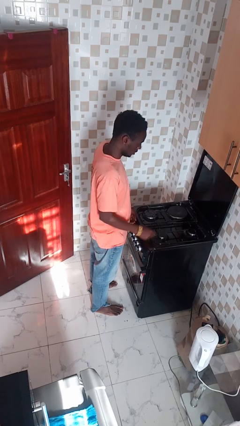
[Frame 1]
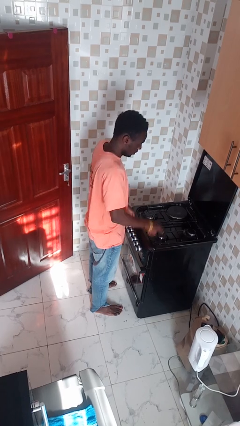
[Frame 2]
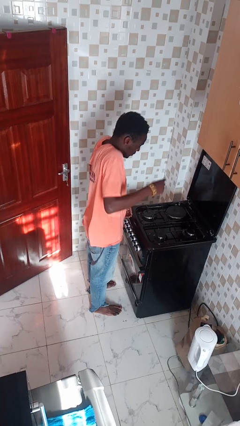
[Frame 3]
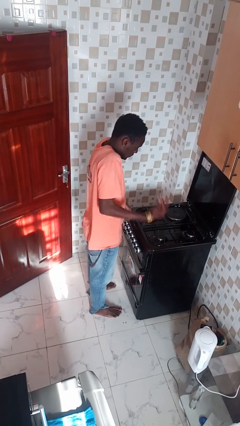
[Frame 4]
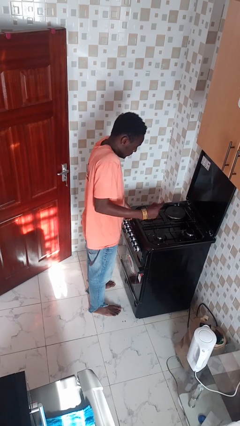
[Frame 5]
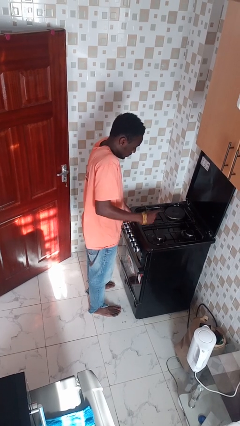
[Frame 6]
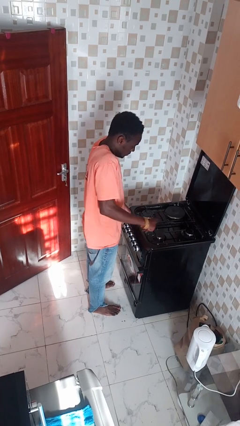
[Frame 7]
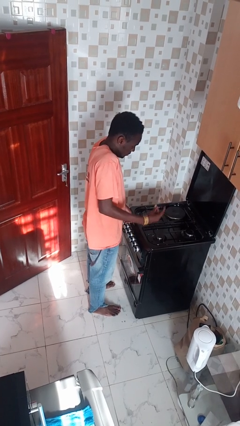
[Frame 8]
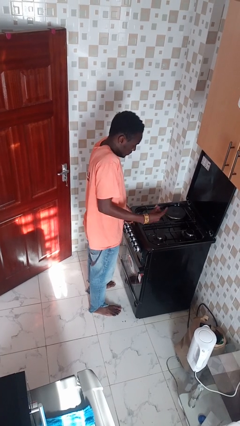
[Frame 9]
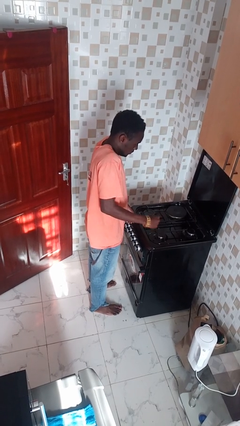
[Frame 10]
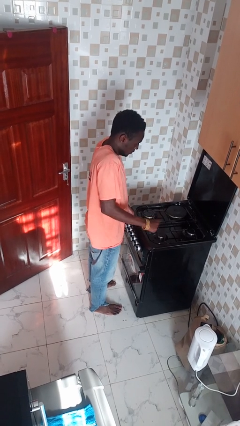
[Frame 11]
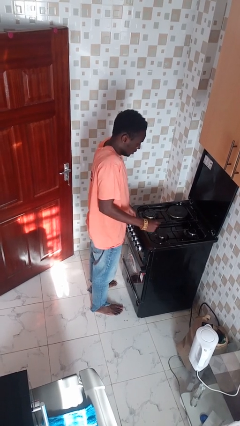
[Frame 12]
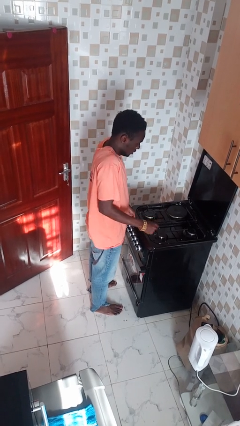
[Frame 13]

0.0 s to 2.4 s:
person burns hand

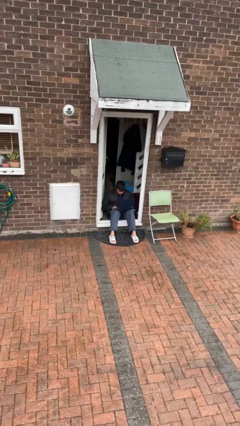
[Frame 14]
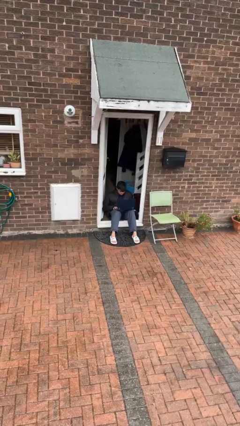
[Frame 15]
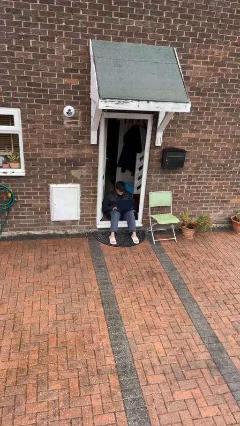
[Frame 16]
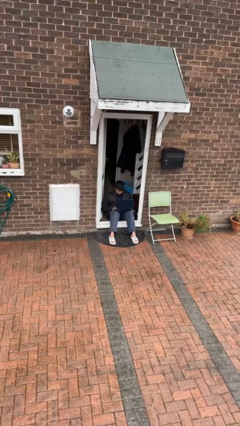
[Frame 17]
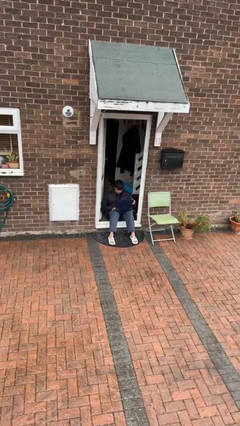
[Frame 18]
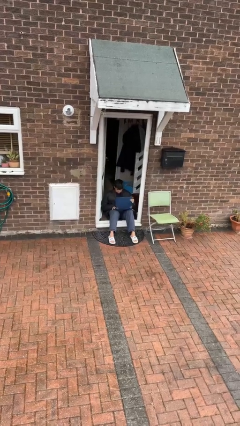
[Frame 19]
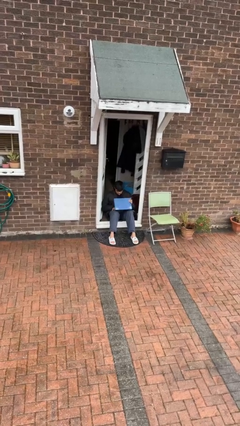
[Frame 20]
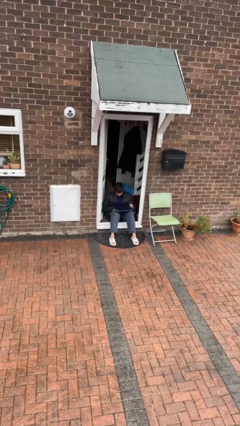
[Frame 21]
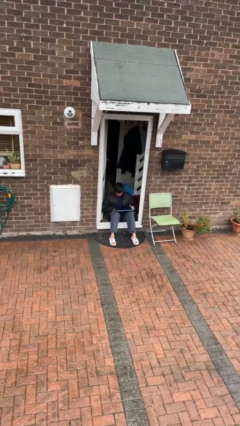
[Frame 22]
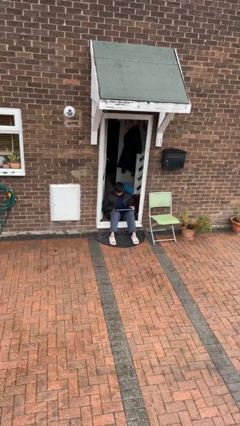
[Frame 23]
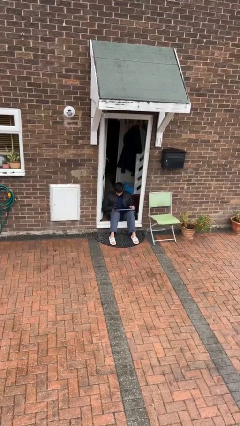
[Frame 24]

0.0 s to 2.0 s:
person closes laptop

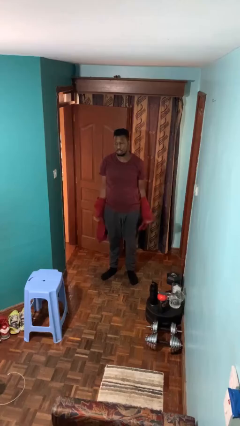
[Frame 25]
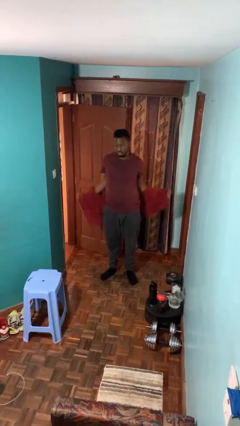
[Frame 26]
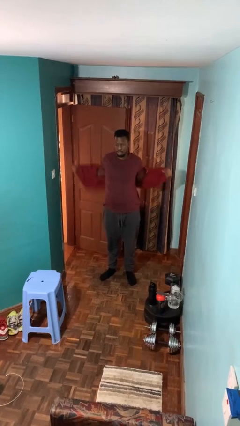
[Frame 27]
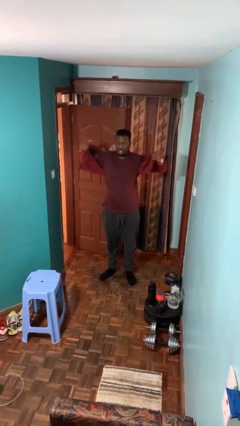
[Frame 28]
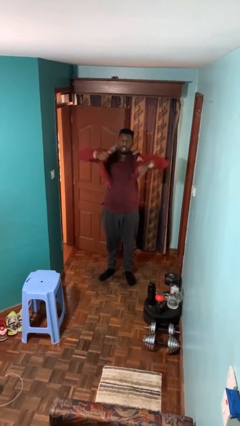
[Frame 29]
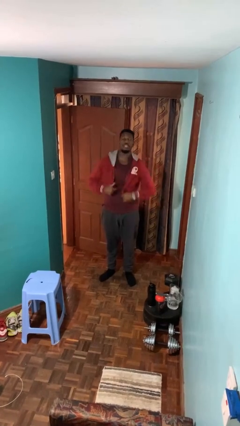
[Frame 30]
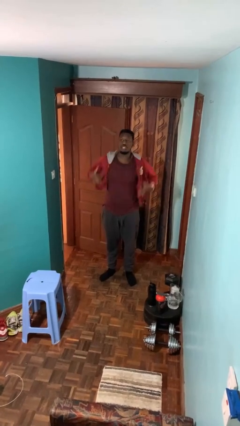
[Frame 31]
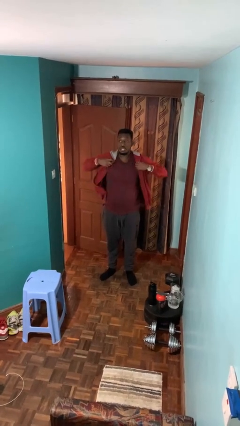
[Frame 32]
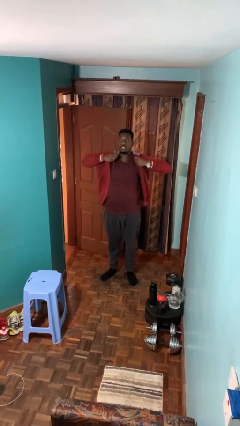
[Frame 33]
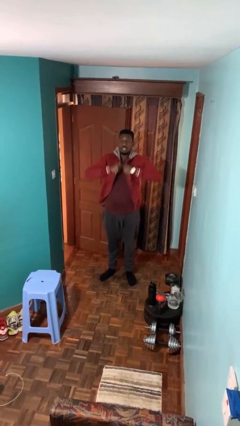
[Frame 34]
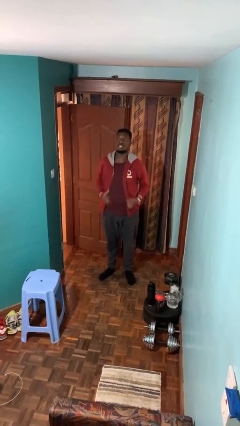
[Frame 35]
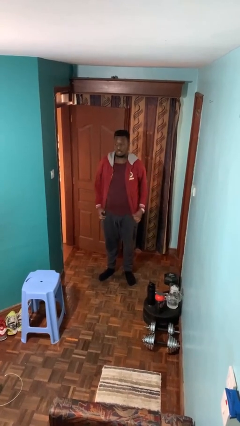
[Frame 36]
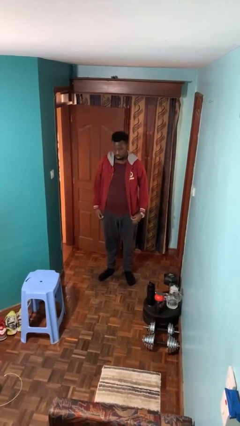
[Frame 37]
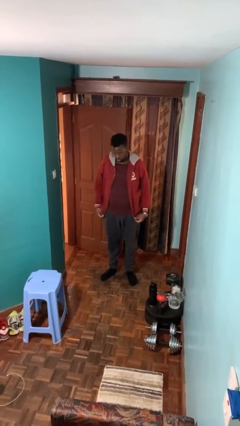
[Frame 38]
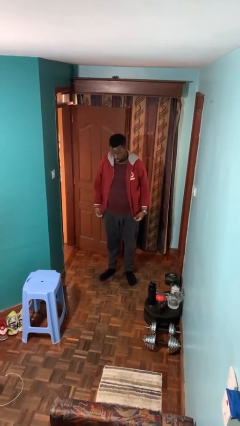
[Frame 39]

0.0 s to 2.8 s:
person puts on jacket

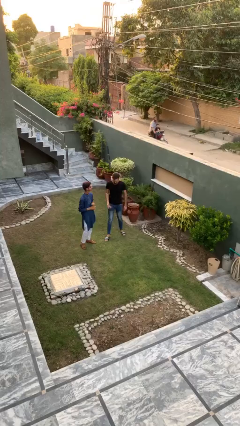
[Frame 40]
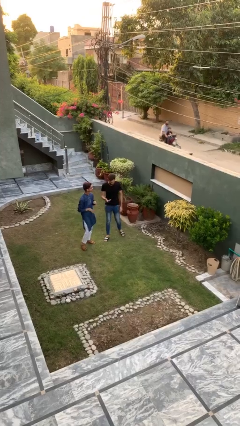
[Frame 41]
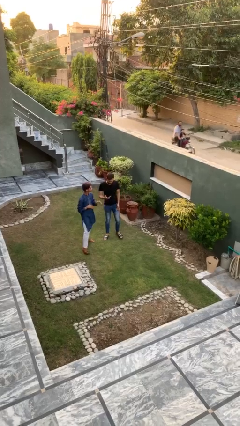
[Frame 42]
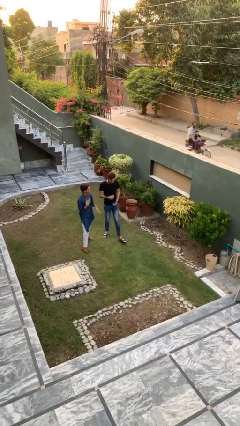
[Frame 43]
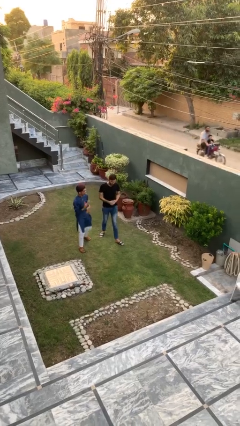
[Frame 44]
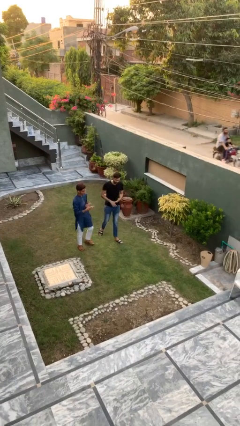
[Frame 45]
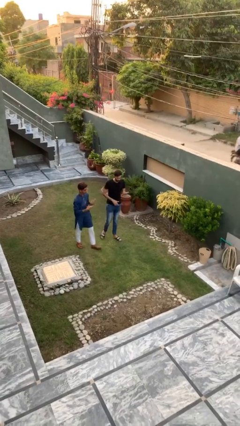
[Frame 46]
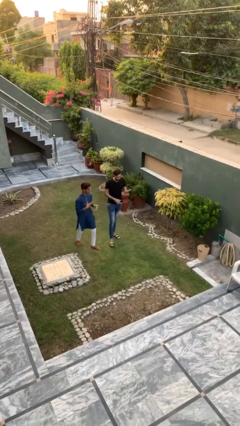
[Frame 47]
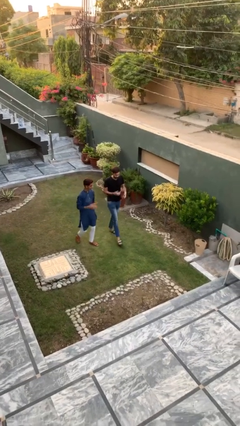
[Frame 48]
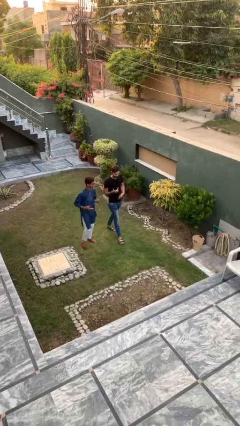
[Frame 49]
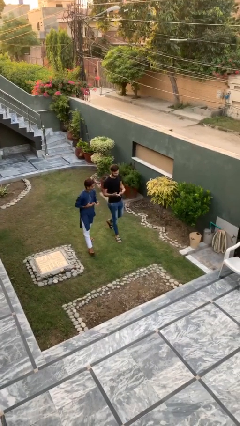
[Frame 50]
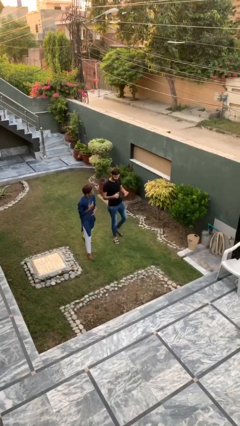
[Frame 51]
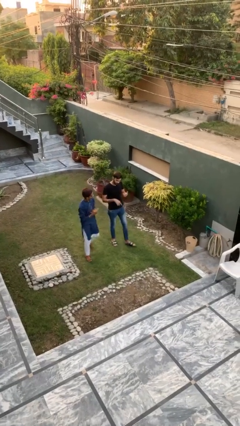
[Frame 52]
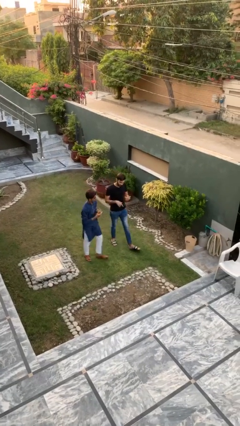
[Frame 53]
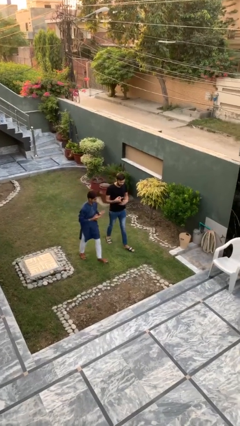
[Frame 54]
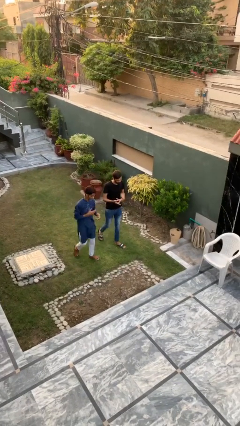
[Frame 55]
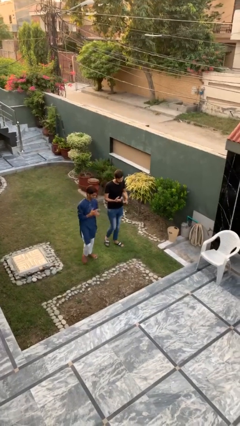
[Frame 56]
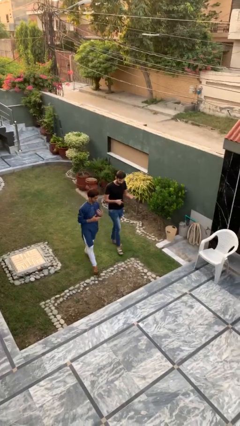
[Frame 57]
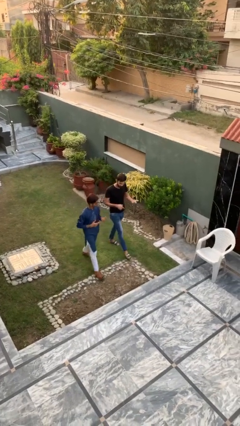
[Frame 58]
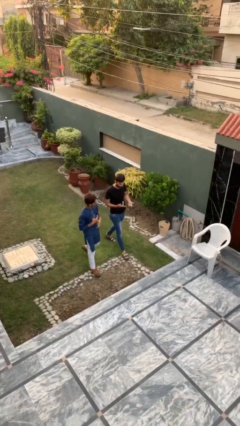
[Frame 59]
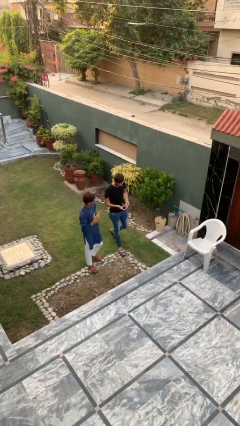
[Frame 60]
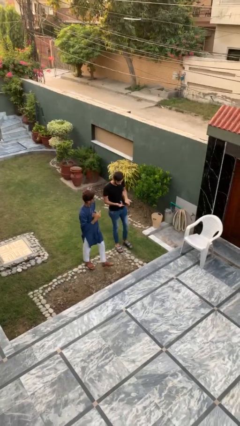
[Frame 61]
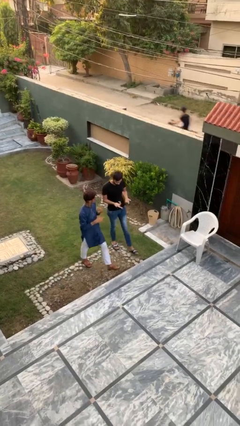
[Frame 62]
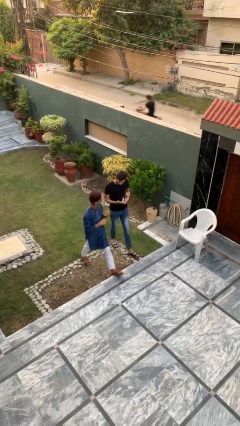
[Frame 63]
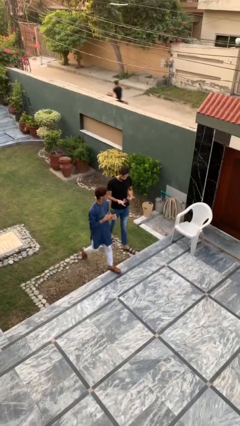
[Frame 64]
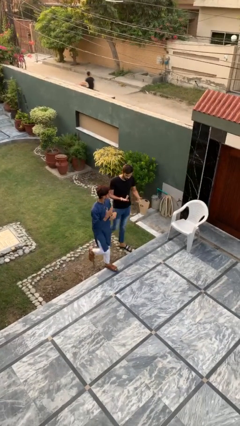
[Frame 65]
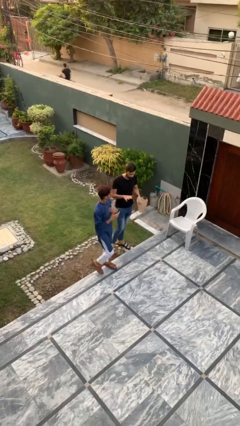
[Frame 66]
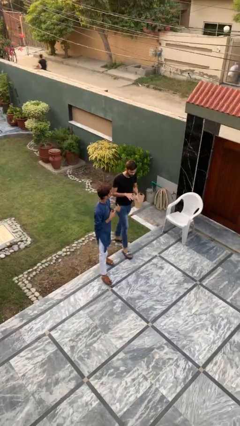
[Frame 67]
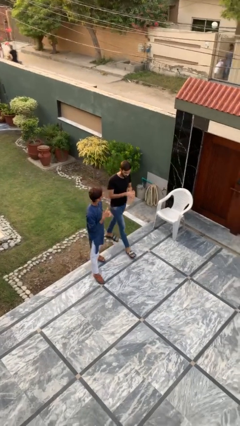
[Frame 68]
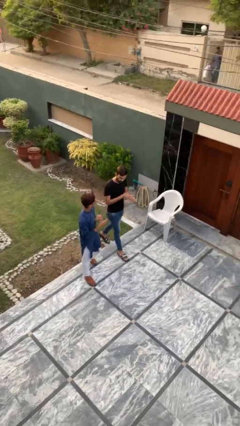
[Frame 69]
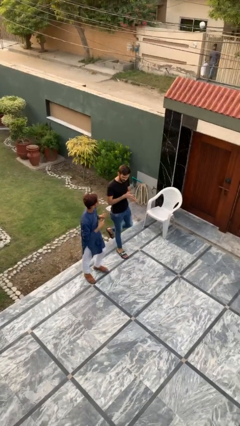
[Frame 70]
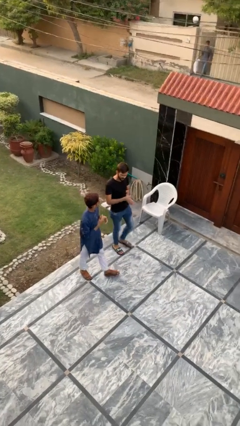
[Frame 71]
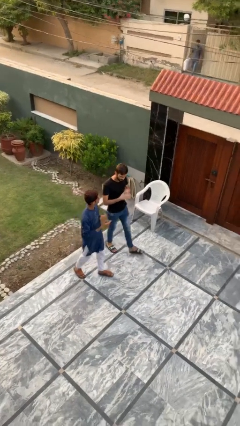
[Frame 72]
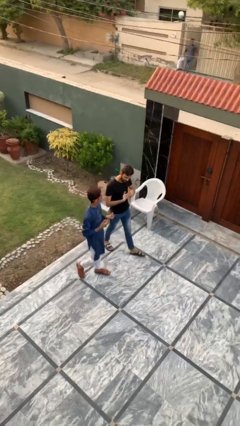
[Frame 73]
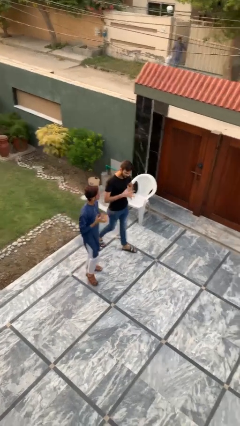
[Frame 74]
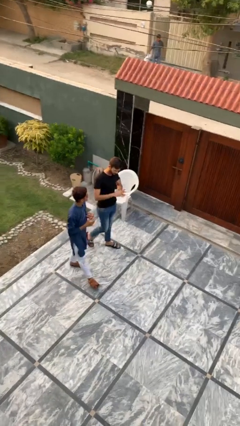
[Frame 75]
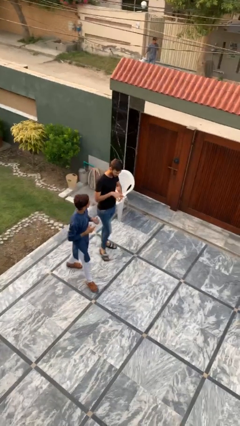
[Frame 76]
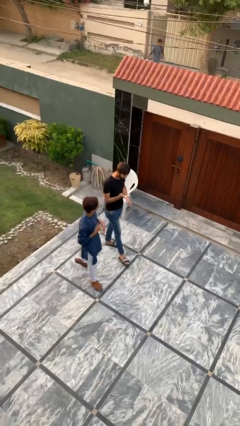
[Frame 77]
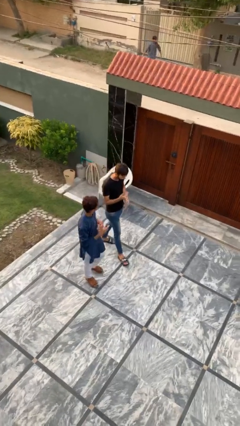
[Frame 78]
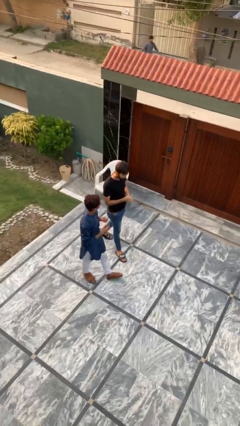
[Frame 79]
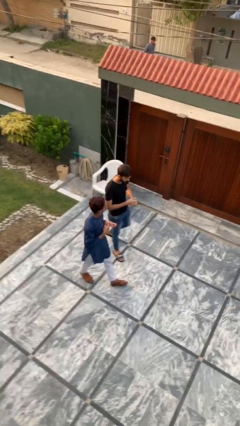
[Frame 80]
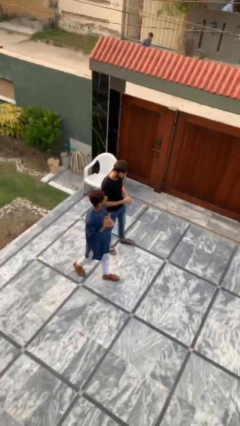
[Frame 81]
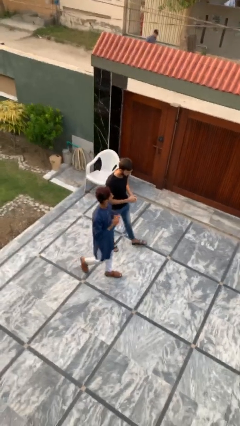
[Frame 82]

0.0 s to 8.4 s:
person talks to person

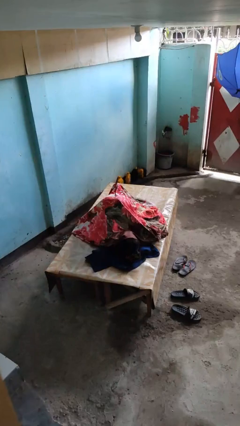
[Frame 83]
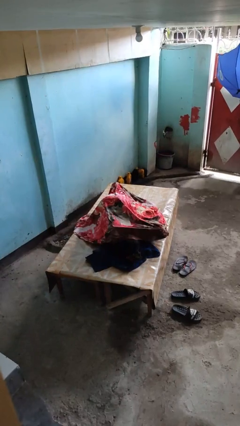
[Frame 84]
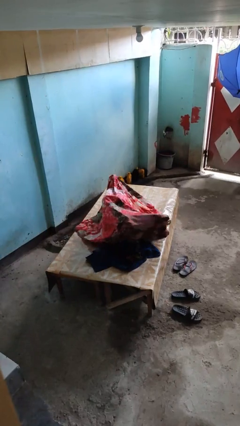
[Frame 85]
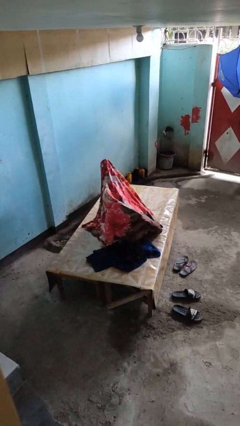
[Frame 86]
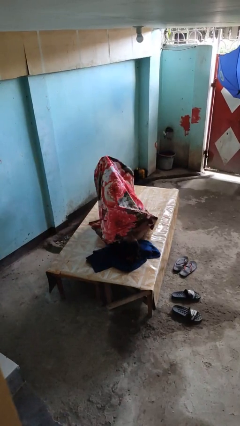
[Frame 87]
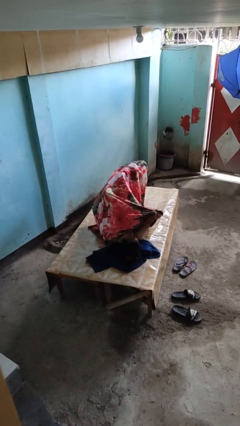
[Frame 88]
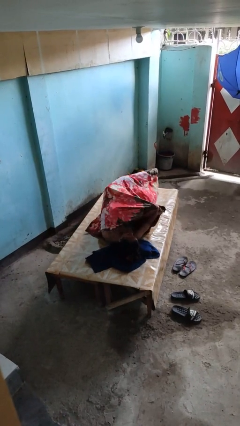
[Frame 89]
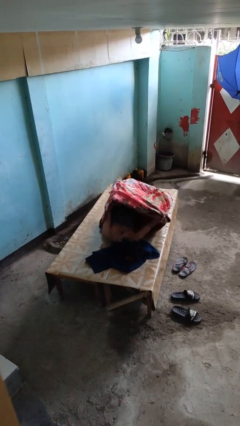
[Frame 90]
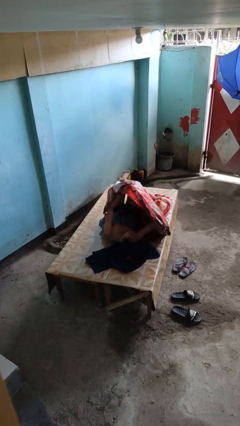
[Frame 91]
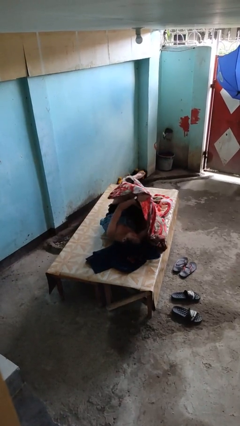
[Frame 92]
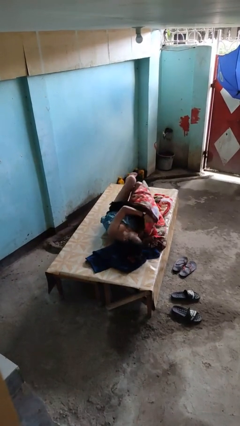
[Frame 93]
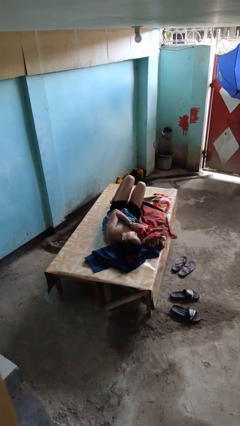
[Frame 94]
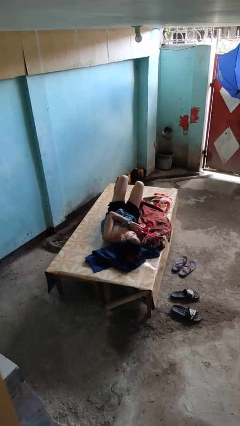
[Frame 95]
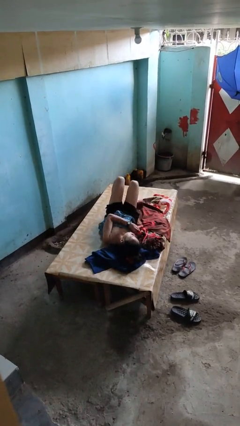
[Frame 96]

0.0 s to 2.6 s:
person uncovers with blanket
